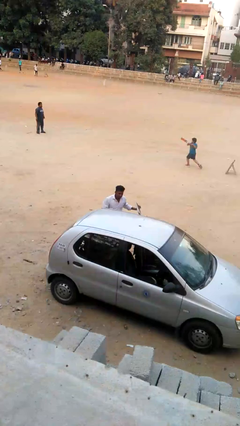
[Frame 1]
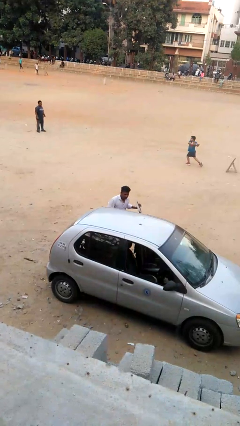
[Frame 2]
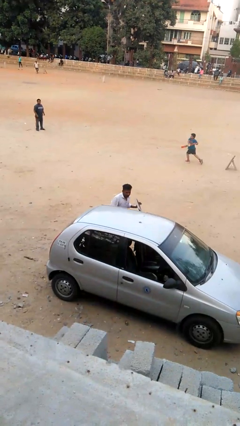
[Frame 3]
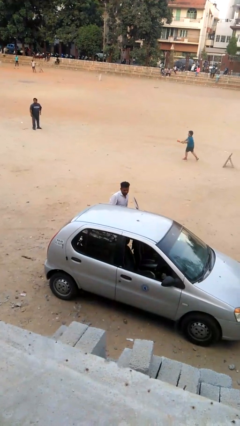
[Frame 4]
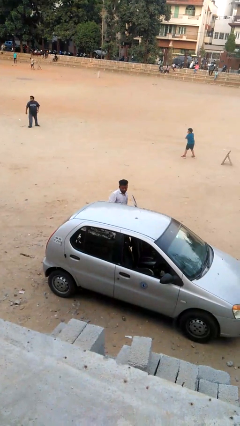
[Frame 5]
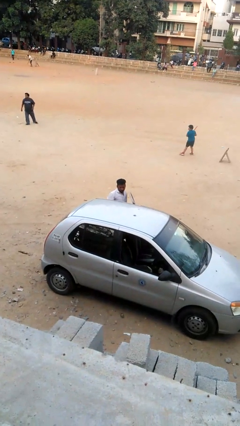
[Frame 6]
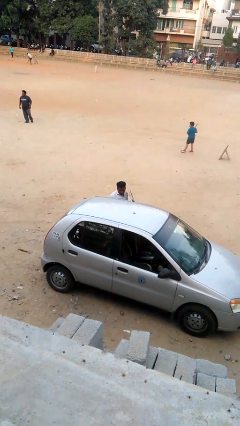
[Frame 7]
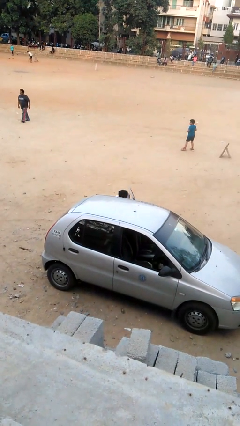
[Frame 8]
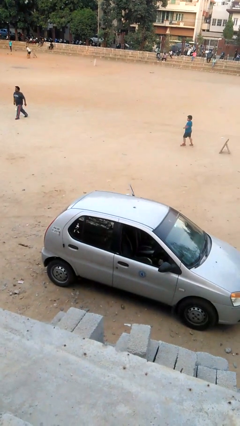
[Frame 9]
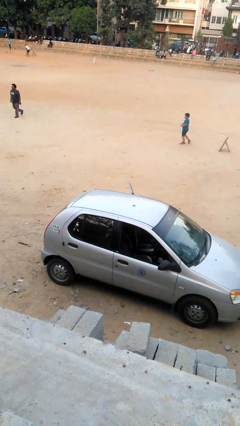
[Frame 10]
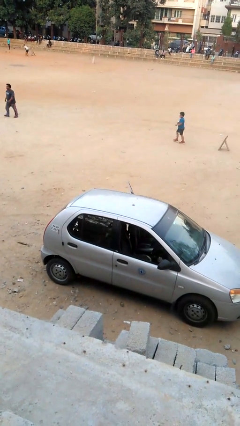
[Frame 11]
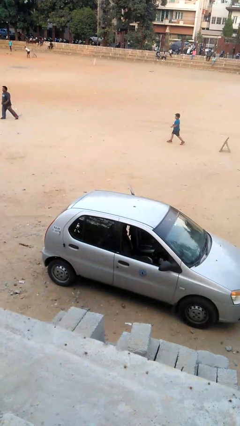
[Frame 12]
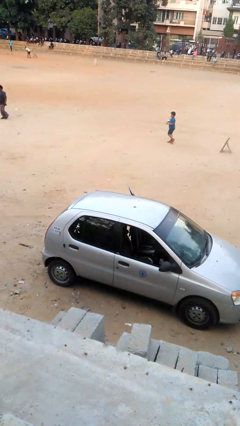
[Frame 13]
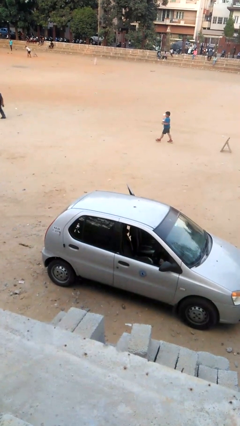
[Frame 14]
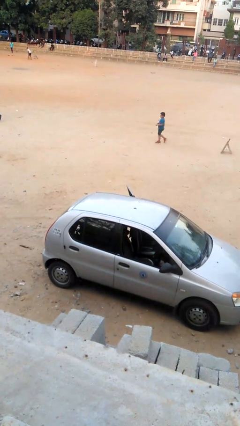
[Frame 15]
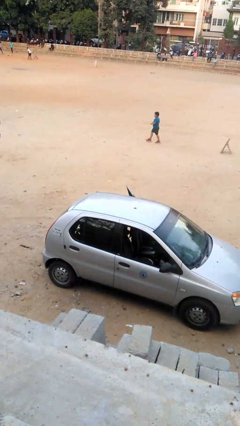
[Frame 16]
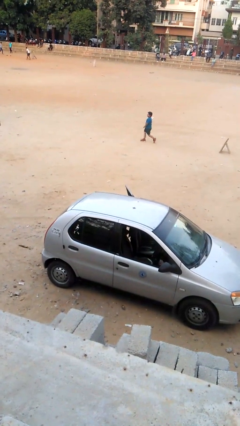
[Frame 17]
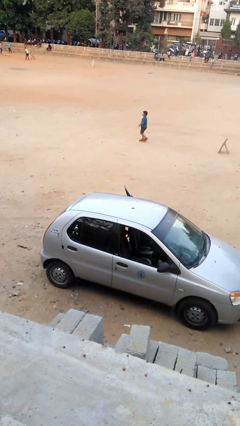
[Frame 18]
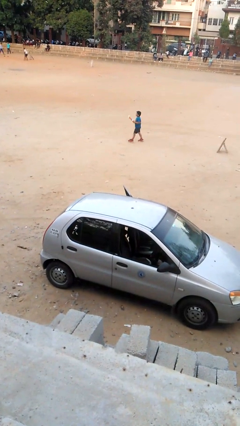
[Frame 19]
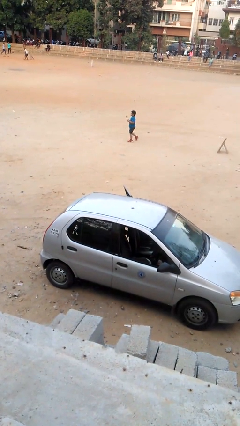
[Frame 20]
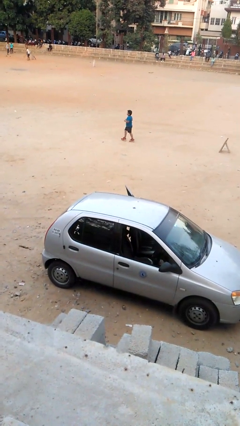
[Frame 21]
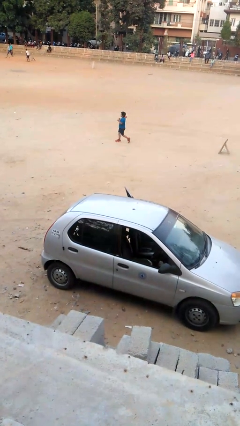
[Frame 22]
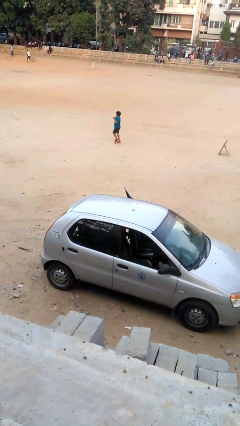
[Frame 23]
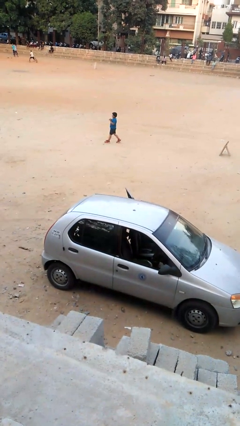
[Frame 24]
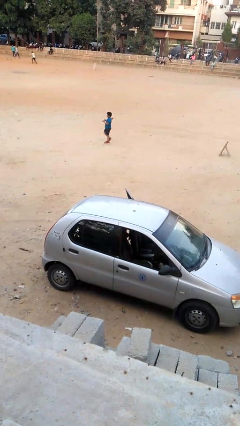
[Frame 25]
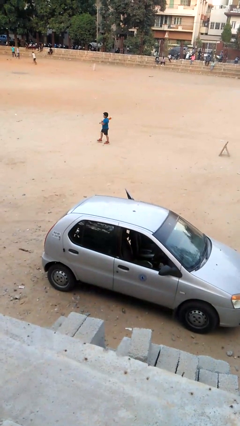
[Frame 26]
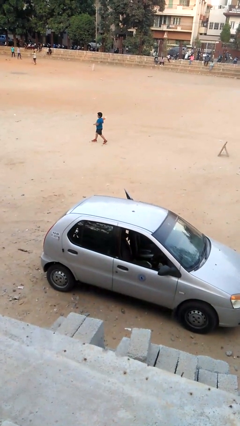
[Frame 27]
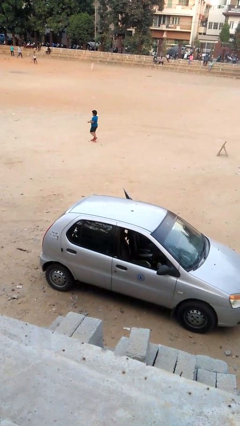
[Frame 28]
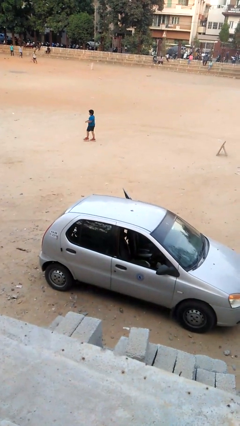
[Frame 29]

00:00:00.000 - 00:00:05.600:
person enters car

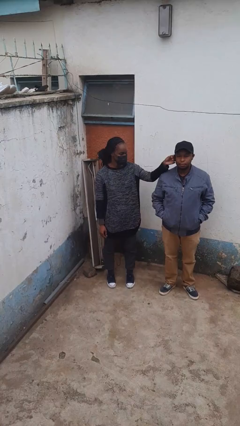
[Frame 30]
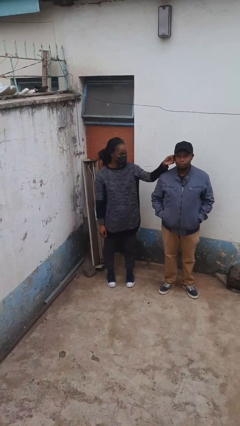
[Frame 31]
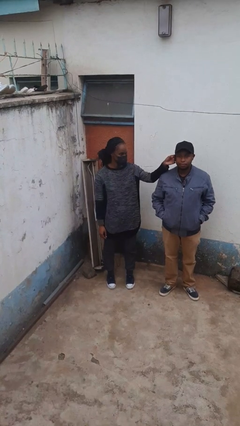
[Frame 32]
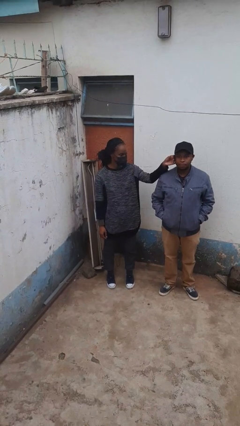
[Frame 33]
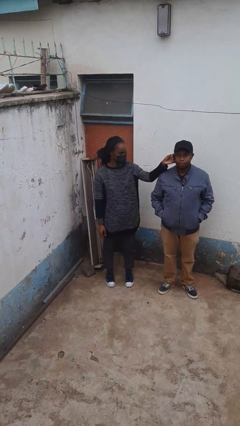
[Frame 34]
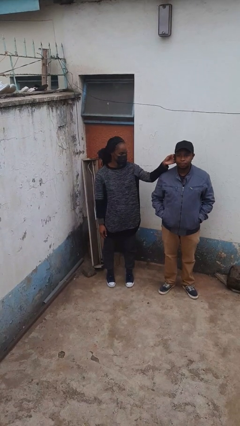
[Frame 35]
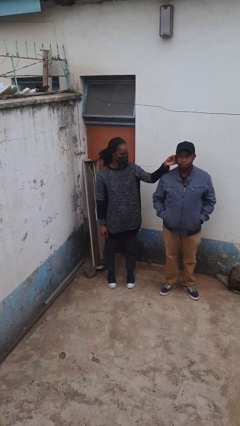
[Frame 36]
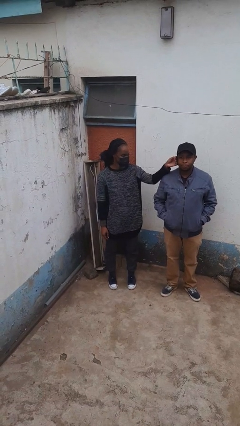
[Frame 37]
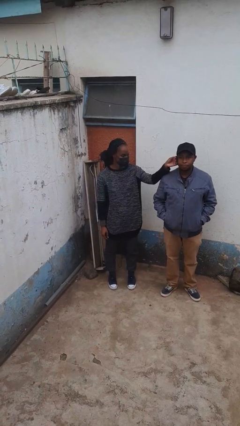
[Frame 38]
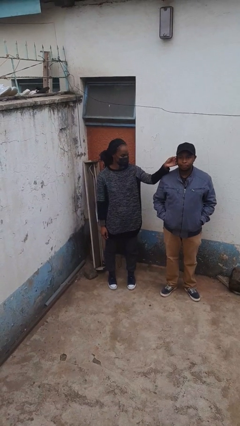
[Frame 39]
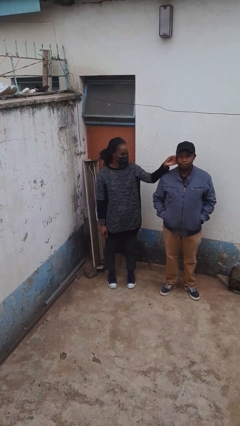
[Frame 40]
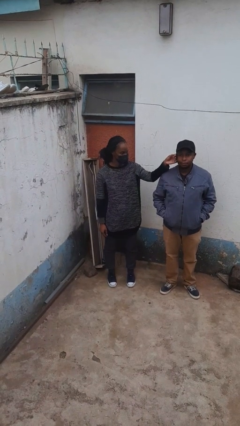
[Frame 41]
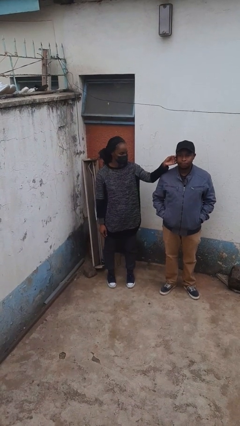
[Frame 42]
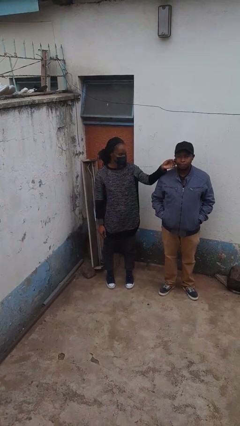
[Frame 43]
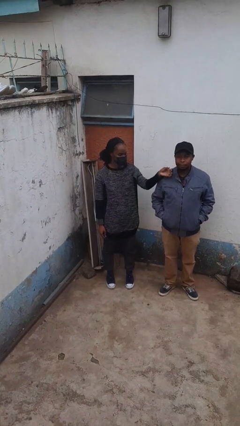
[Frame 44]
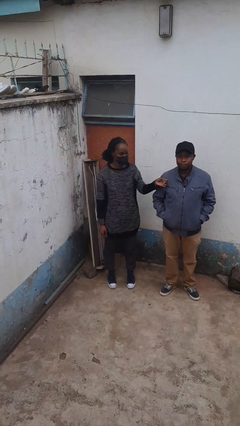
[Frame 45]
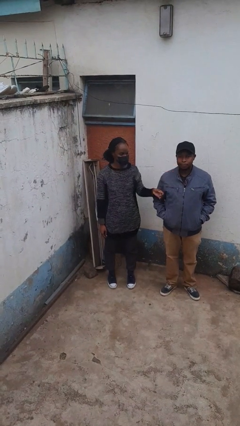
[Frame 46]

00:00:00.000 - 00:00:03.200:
person touches face of person

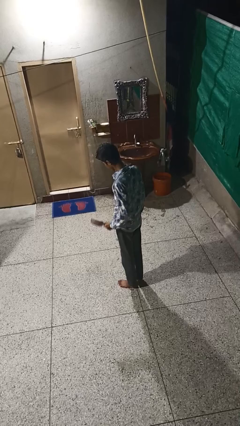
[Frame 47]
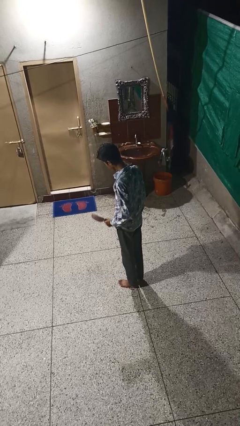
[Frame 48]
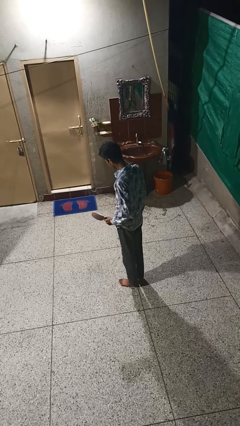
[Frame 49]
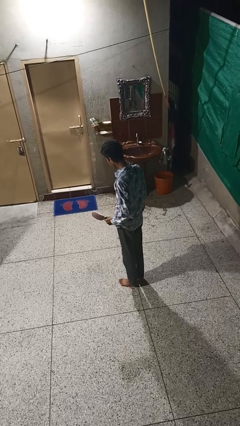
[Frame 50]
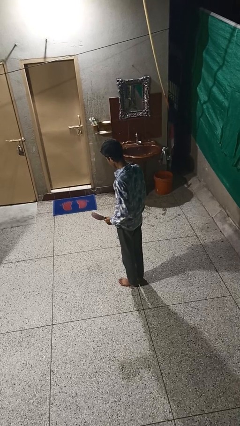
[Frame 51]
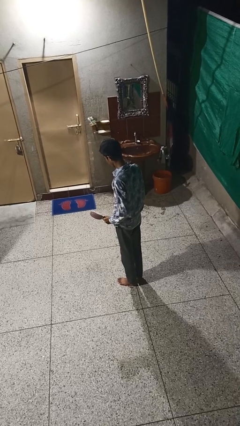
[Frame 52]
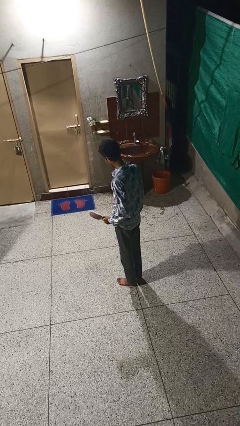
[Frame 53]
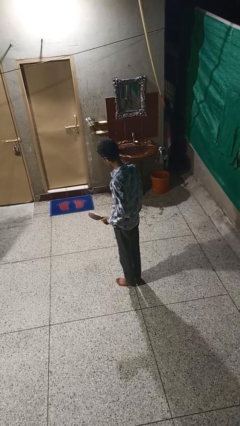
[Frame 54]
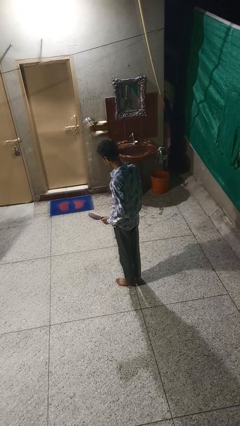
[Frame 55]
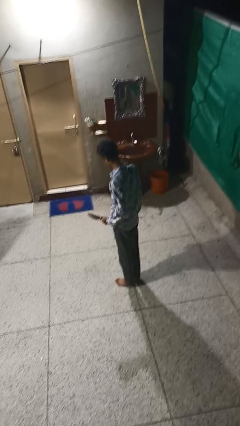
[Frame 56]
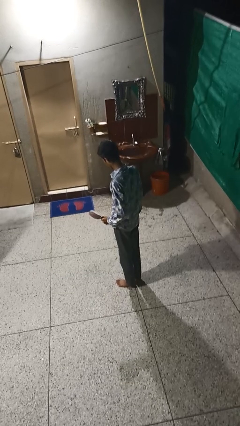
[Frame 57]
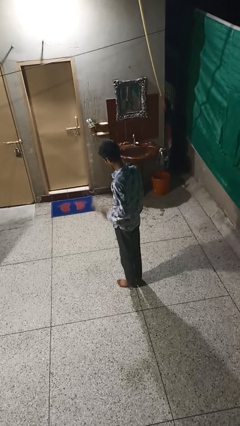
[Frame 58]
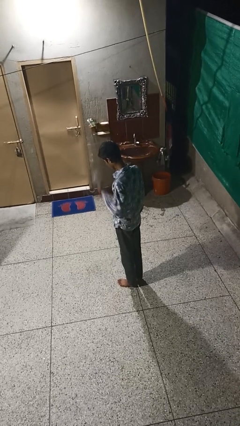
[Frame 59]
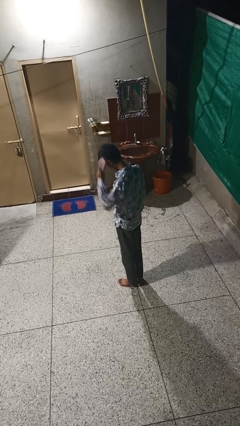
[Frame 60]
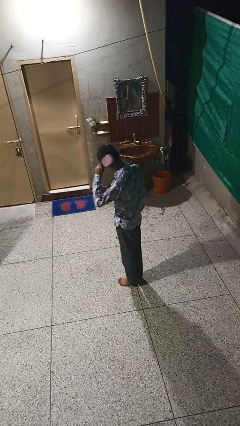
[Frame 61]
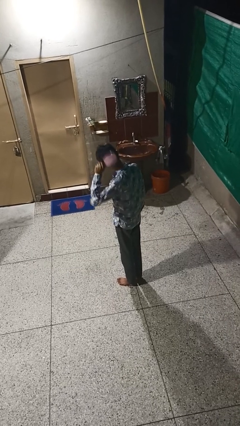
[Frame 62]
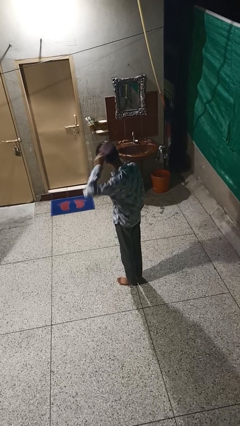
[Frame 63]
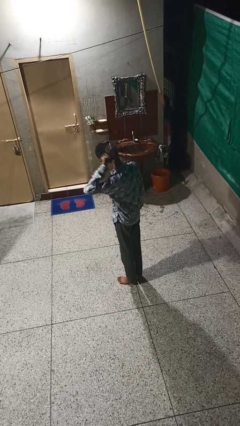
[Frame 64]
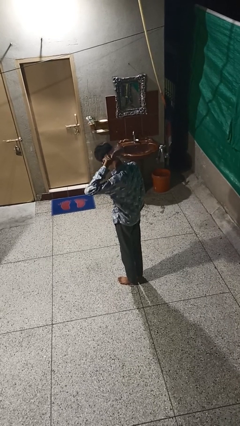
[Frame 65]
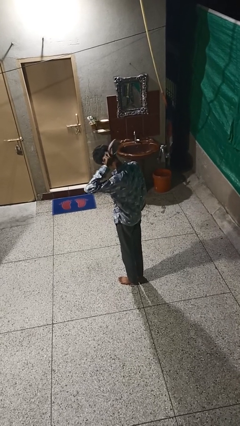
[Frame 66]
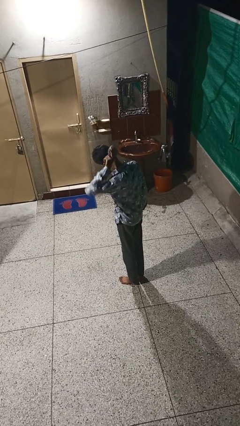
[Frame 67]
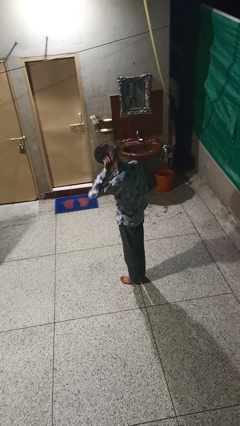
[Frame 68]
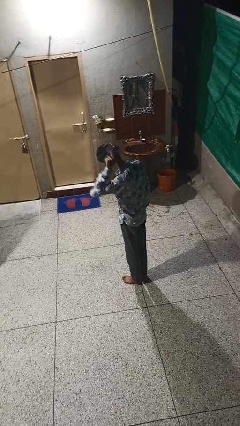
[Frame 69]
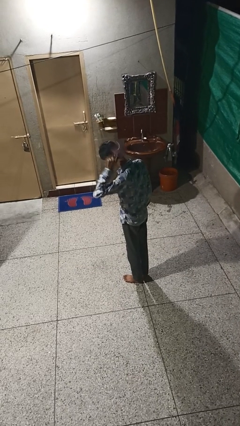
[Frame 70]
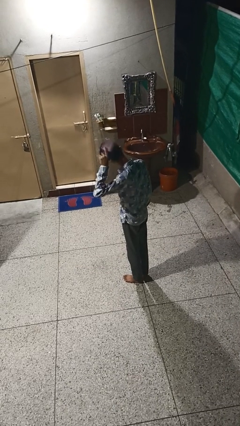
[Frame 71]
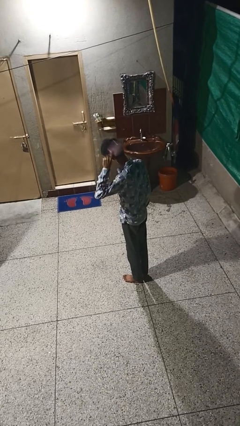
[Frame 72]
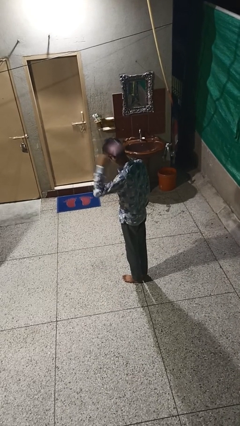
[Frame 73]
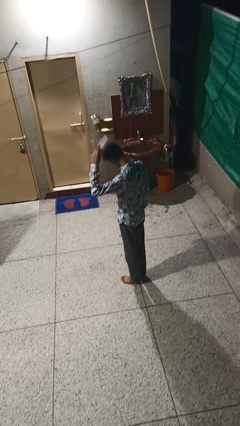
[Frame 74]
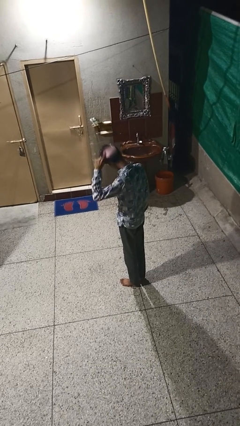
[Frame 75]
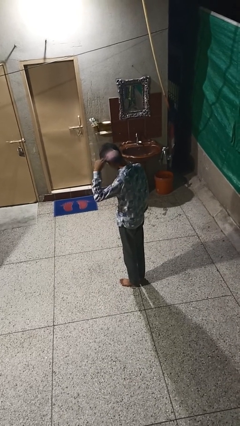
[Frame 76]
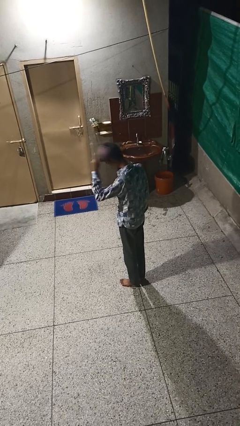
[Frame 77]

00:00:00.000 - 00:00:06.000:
person takes off wristwatch

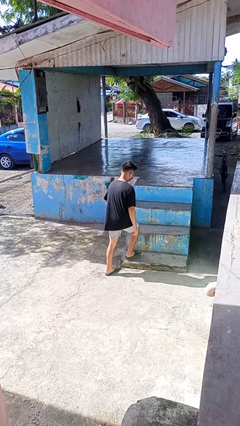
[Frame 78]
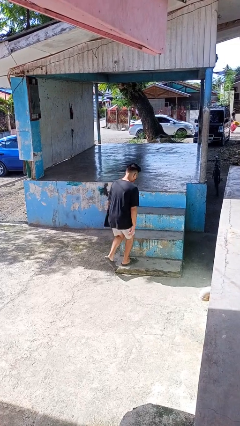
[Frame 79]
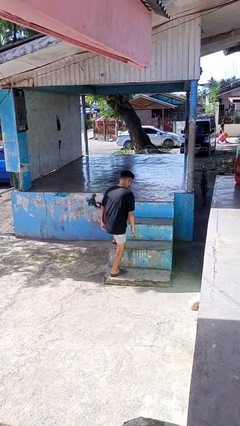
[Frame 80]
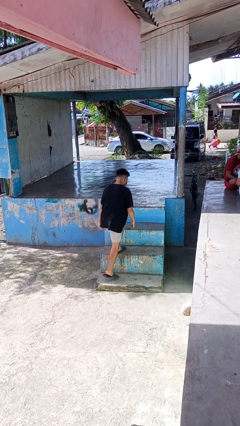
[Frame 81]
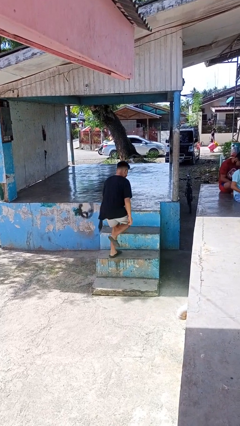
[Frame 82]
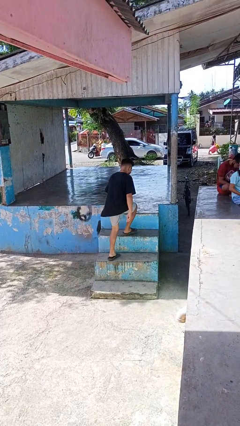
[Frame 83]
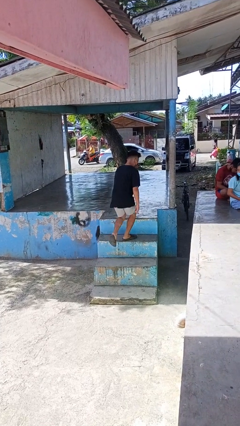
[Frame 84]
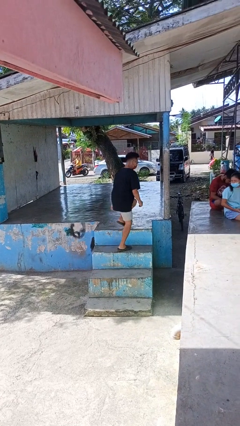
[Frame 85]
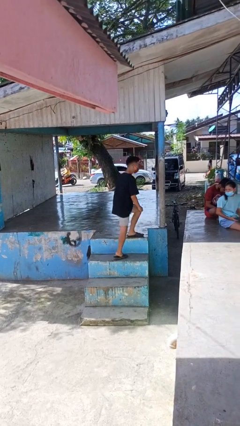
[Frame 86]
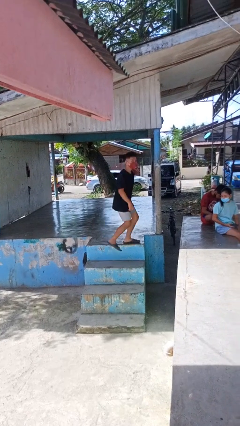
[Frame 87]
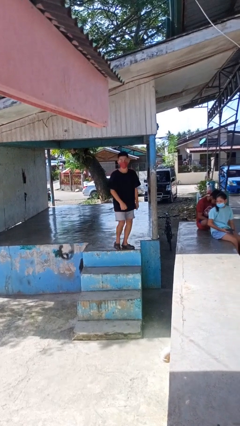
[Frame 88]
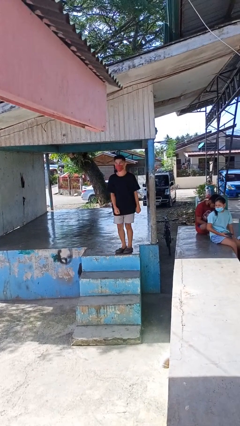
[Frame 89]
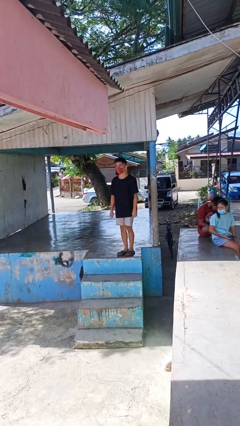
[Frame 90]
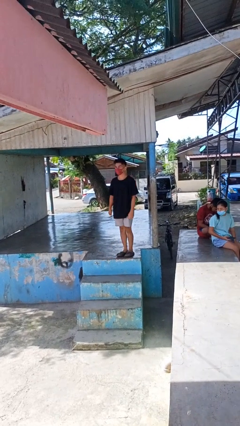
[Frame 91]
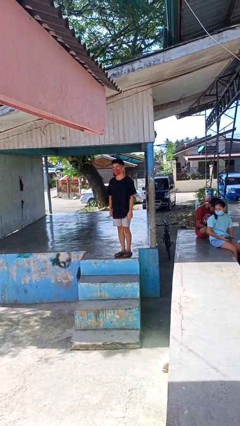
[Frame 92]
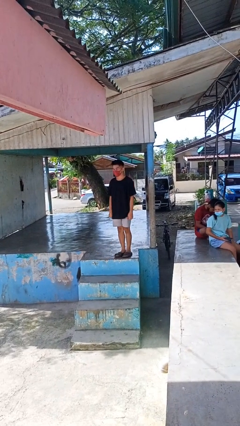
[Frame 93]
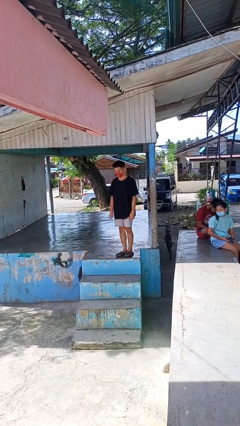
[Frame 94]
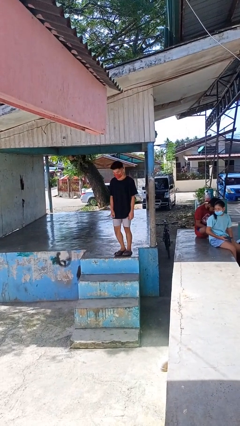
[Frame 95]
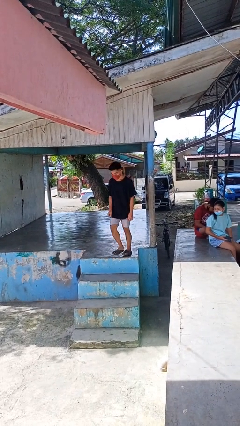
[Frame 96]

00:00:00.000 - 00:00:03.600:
person climbs up stairs
